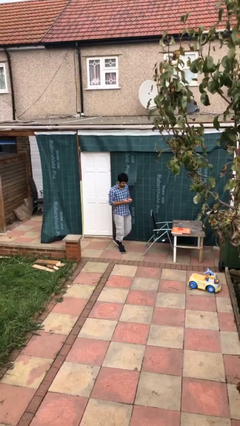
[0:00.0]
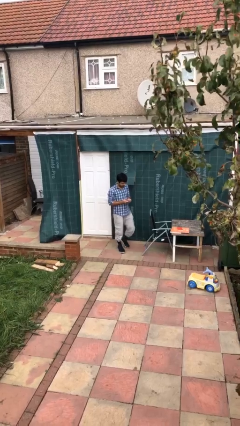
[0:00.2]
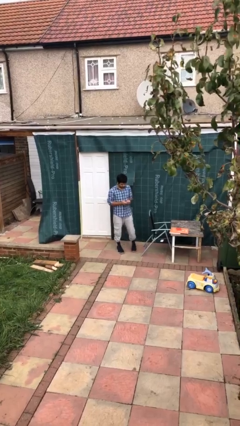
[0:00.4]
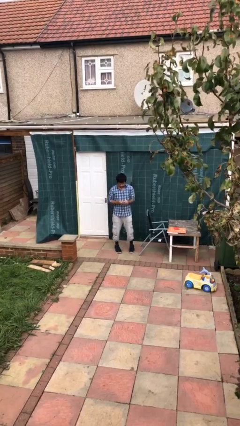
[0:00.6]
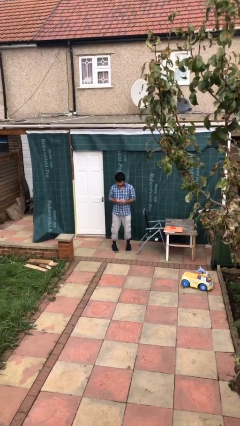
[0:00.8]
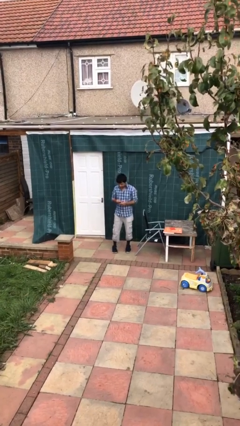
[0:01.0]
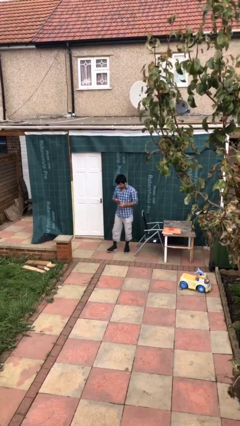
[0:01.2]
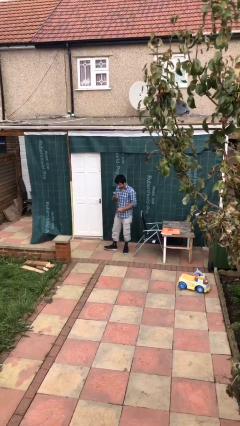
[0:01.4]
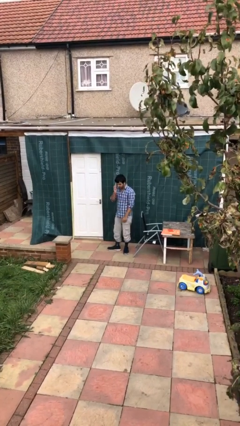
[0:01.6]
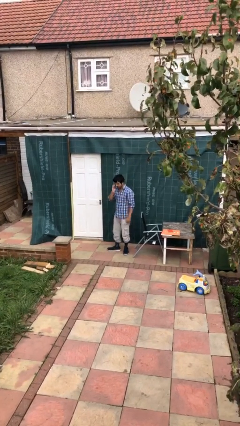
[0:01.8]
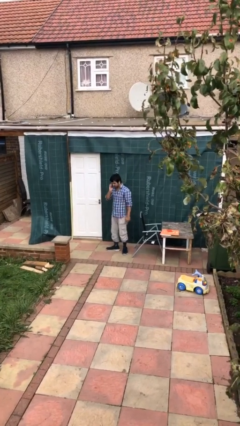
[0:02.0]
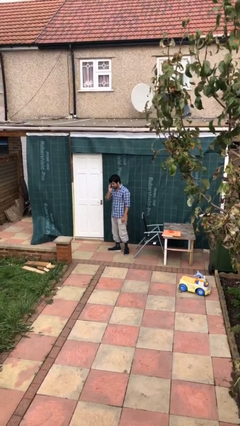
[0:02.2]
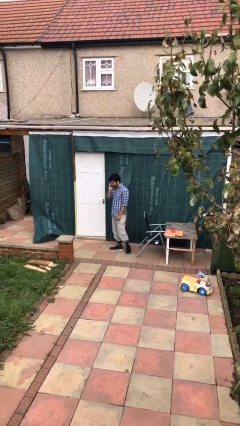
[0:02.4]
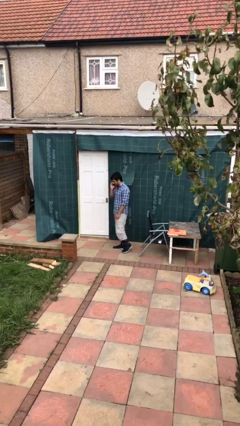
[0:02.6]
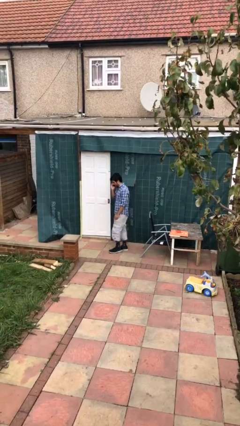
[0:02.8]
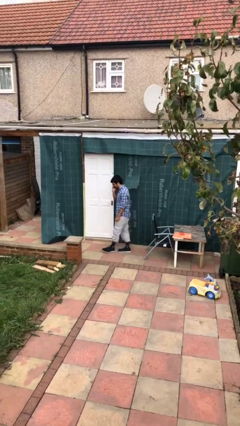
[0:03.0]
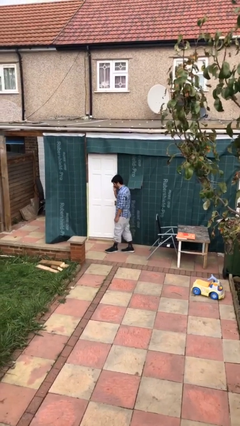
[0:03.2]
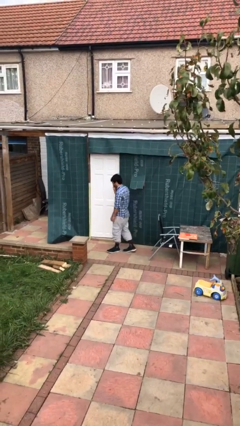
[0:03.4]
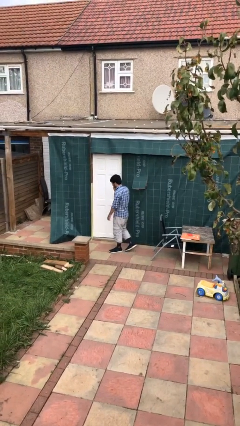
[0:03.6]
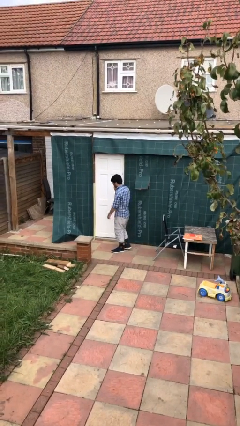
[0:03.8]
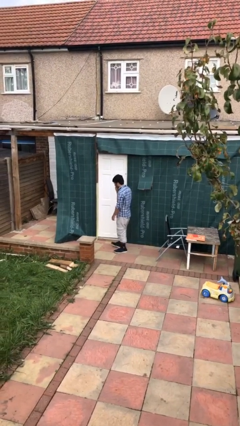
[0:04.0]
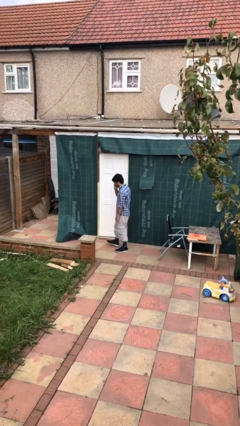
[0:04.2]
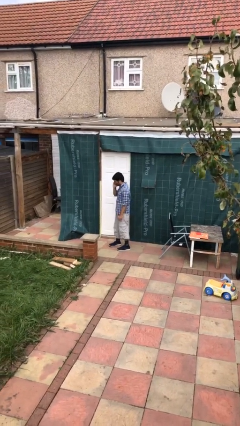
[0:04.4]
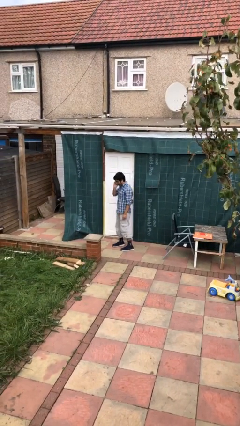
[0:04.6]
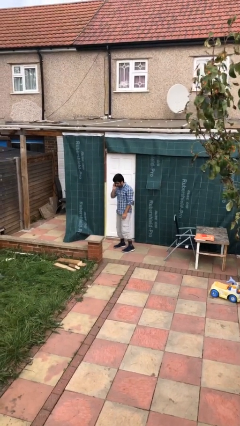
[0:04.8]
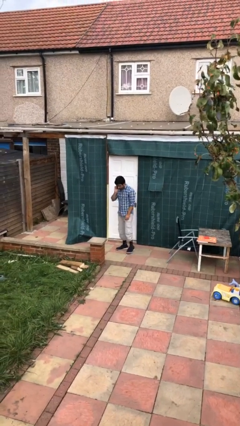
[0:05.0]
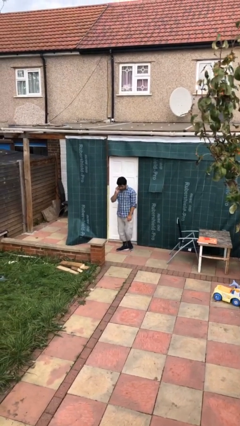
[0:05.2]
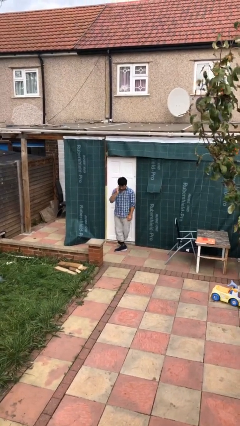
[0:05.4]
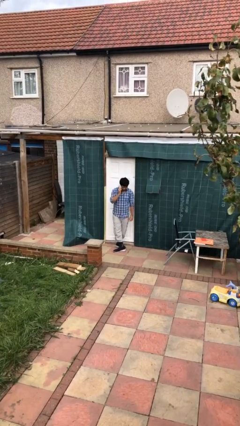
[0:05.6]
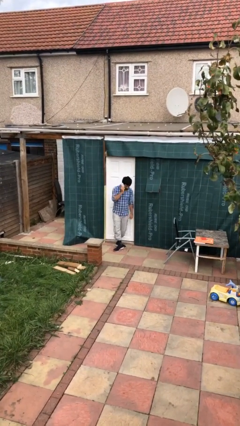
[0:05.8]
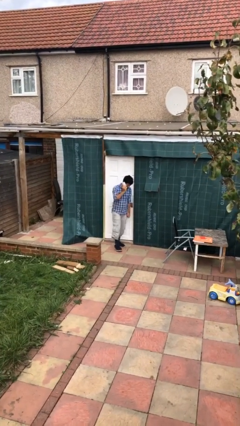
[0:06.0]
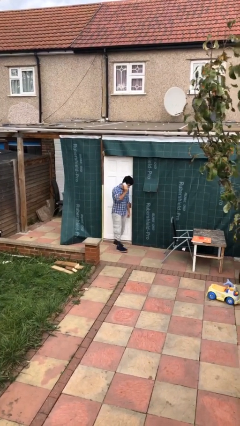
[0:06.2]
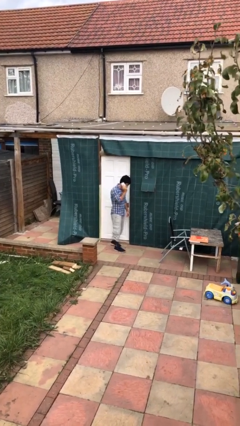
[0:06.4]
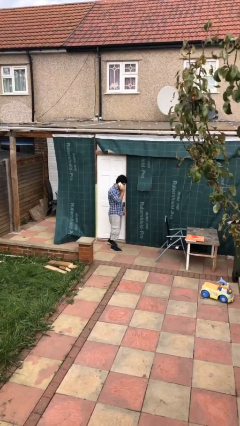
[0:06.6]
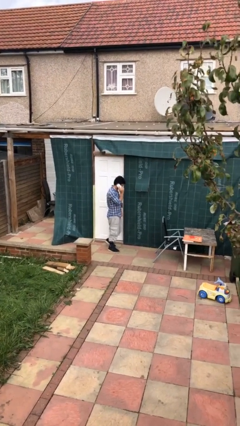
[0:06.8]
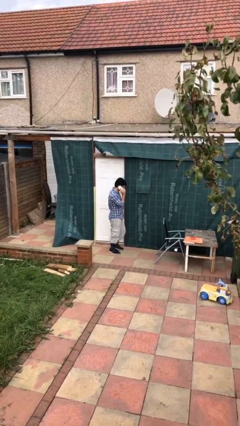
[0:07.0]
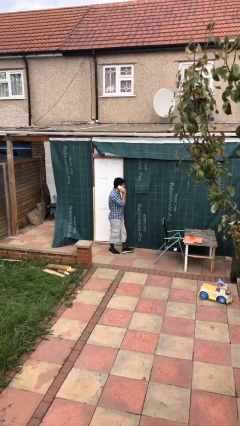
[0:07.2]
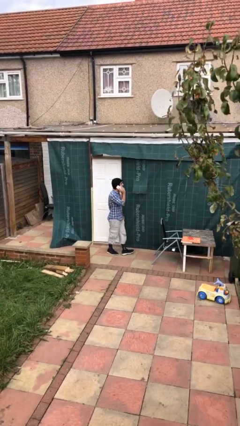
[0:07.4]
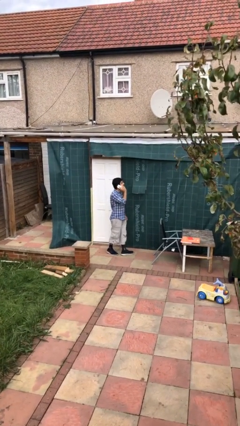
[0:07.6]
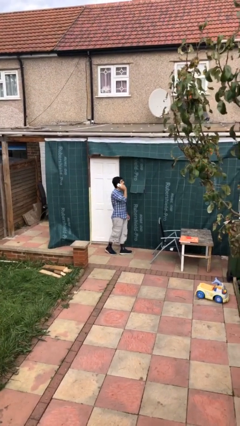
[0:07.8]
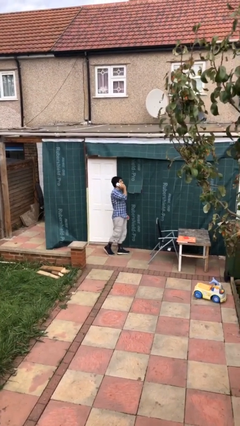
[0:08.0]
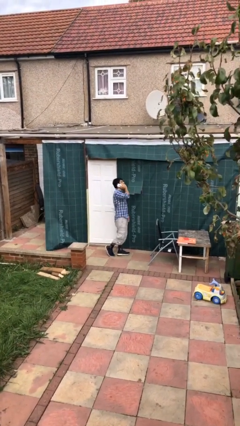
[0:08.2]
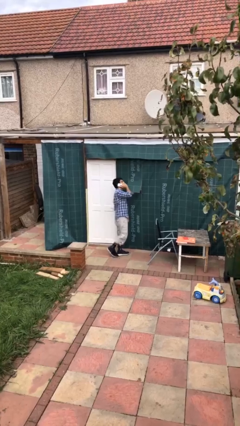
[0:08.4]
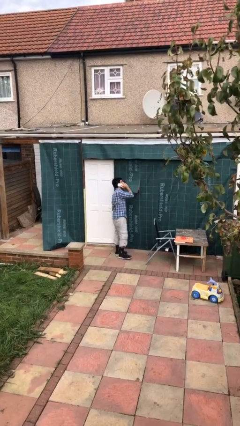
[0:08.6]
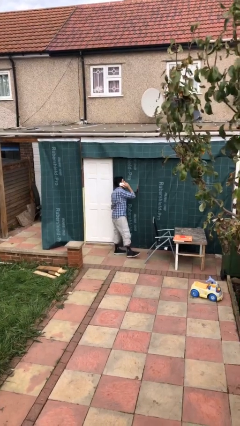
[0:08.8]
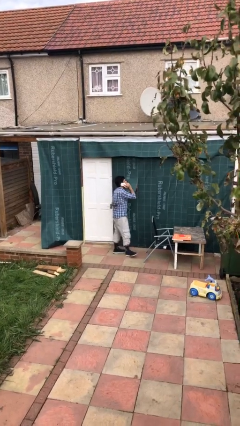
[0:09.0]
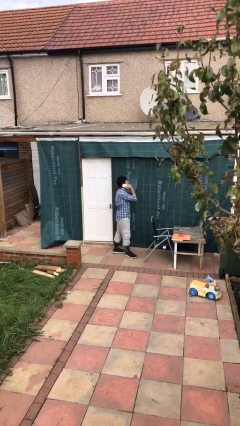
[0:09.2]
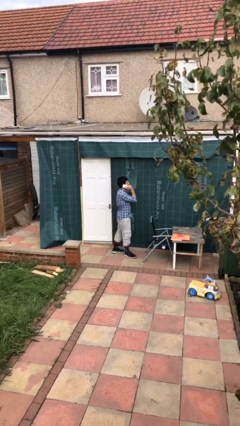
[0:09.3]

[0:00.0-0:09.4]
person talks on phone

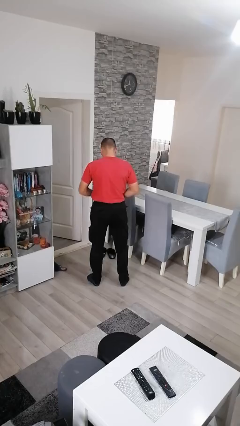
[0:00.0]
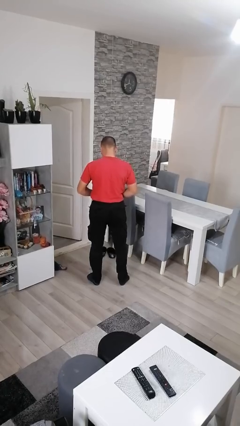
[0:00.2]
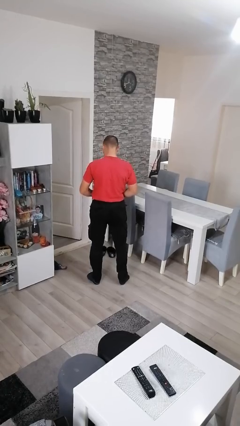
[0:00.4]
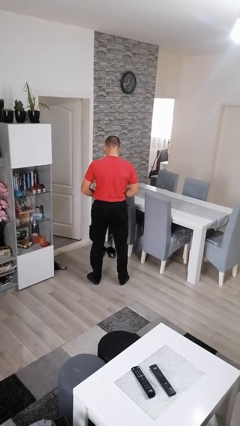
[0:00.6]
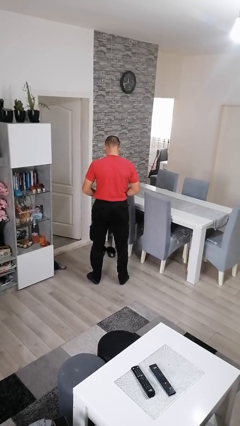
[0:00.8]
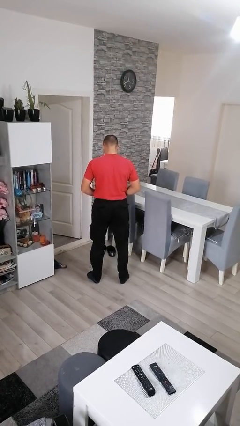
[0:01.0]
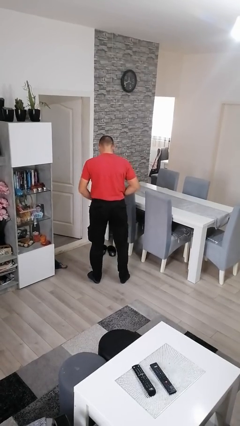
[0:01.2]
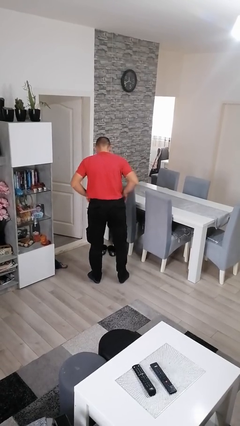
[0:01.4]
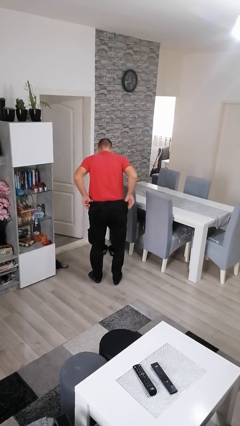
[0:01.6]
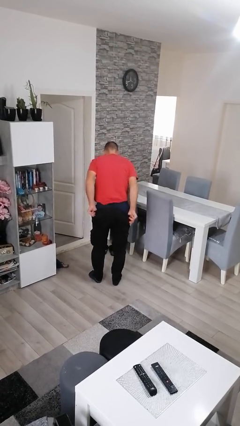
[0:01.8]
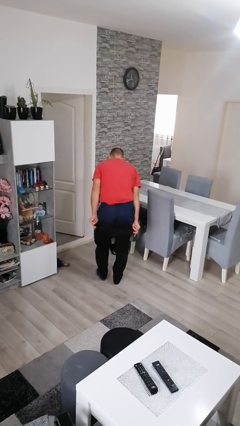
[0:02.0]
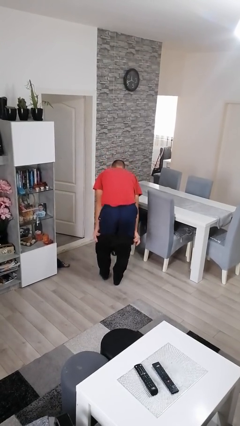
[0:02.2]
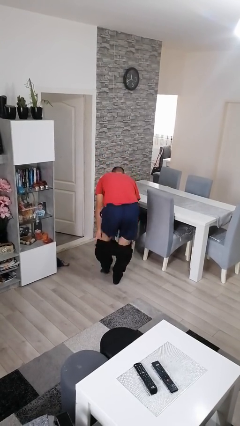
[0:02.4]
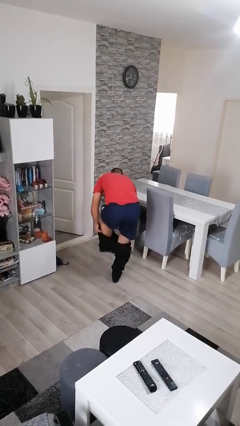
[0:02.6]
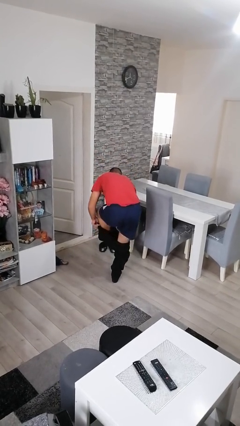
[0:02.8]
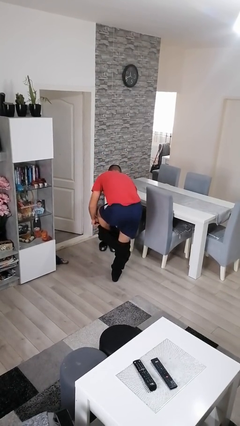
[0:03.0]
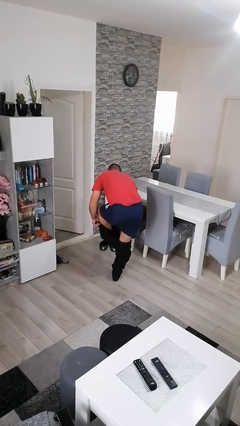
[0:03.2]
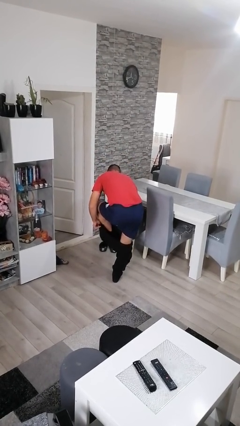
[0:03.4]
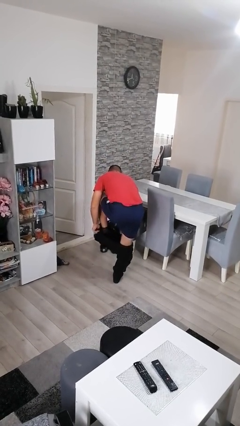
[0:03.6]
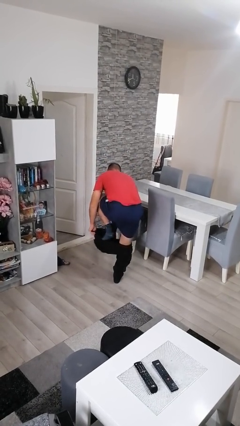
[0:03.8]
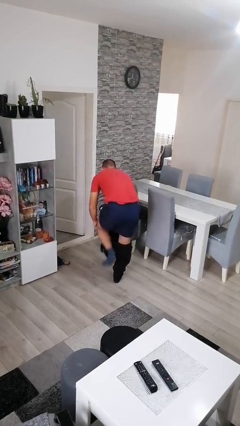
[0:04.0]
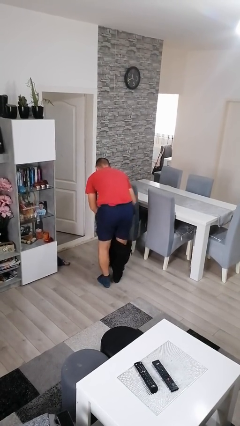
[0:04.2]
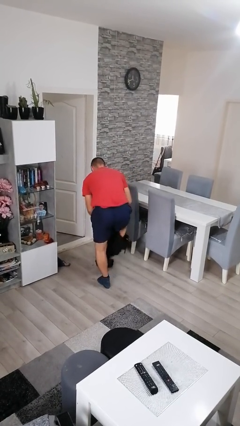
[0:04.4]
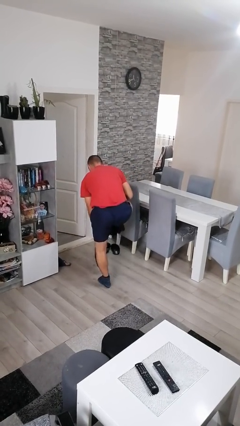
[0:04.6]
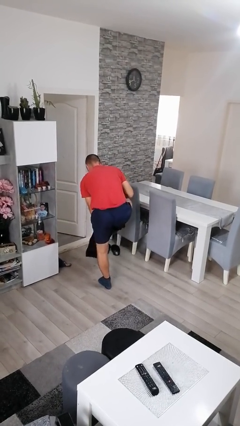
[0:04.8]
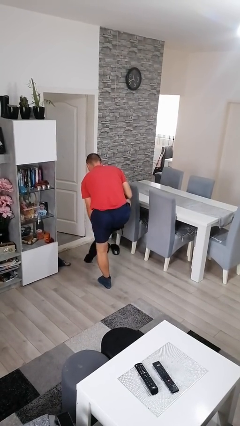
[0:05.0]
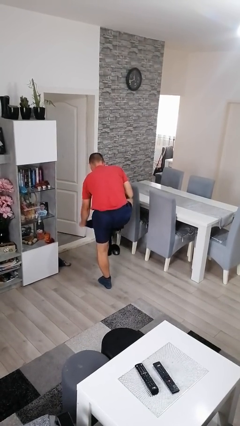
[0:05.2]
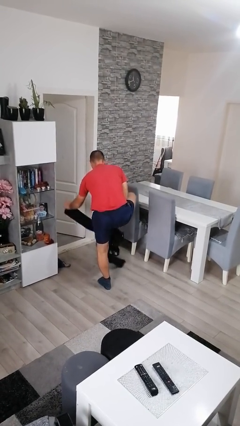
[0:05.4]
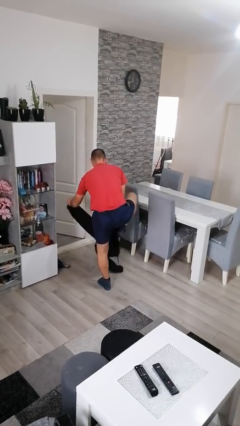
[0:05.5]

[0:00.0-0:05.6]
person takes off pants

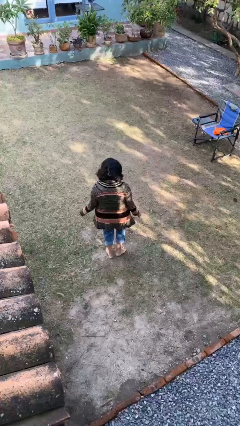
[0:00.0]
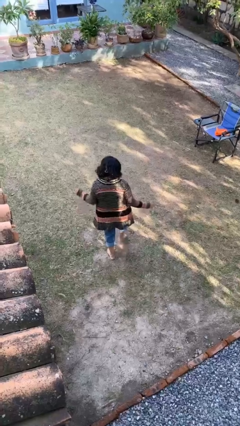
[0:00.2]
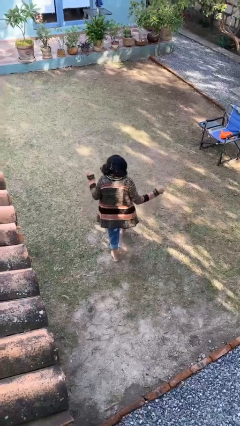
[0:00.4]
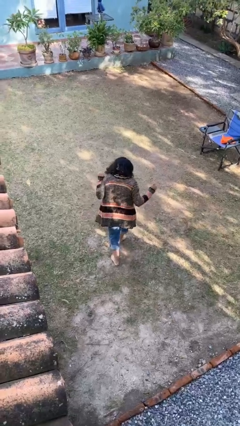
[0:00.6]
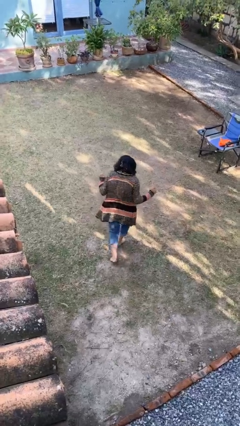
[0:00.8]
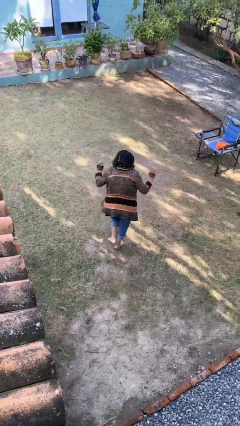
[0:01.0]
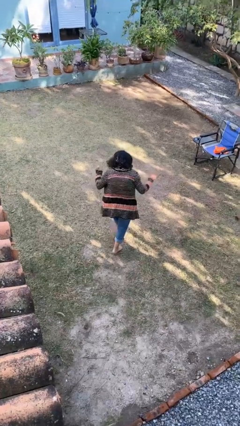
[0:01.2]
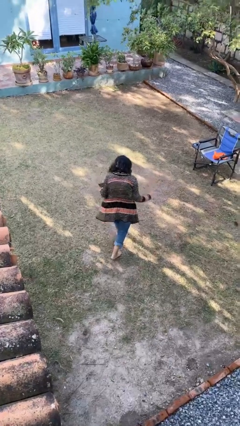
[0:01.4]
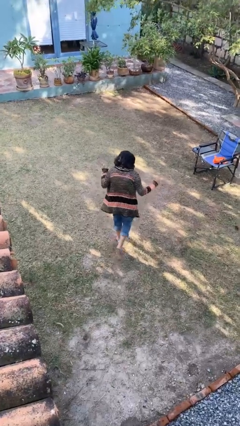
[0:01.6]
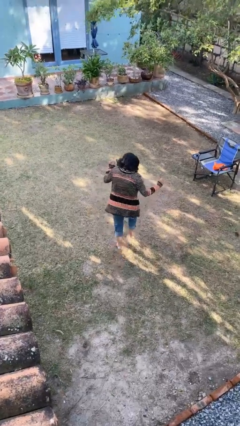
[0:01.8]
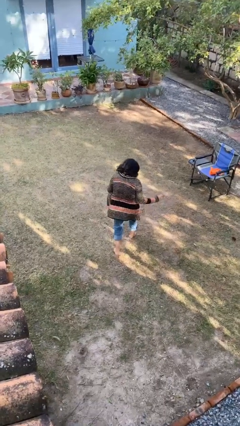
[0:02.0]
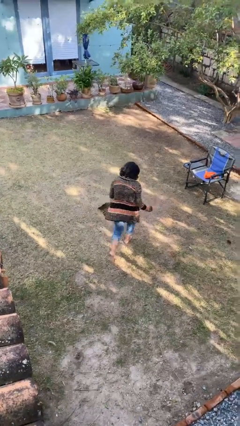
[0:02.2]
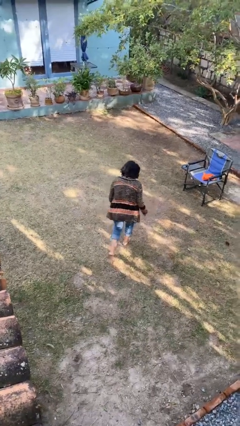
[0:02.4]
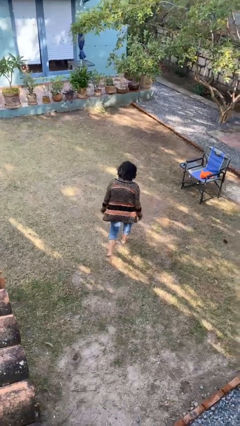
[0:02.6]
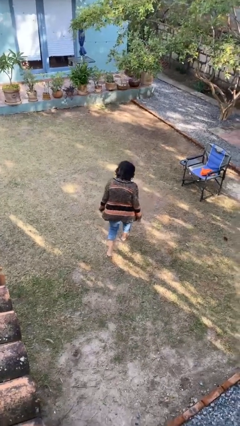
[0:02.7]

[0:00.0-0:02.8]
person walks tiptoe

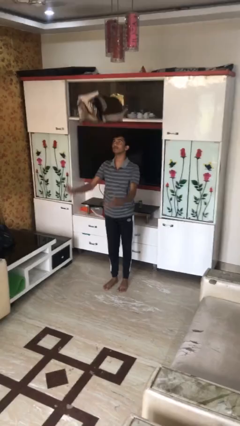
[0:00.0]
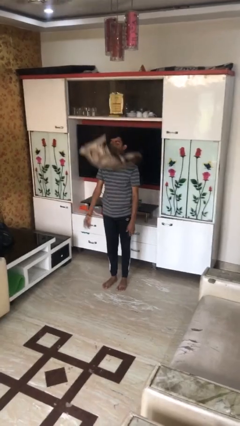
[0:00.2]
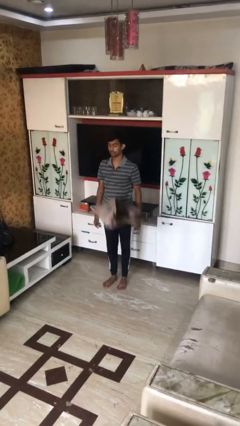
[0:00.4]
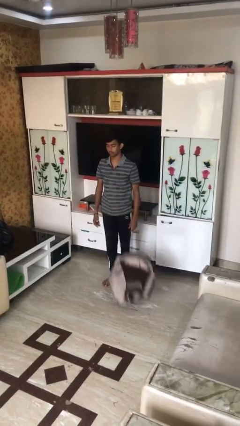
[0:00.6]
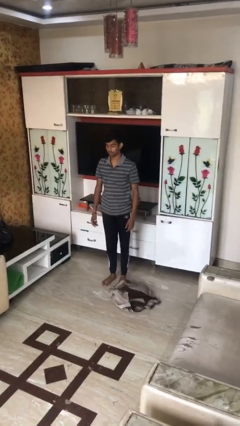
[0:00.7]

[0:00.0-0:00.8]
person throws object into air
